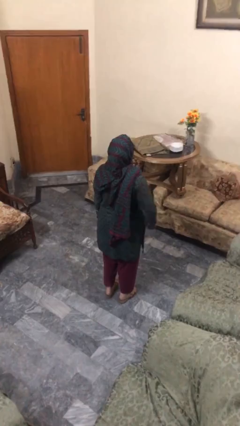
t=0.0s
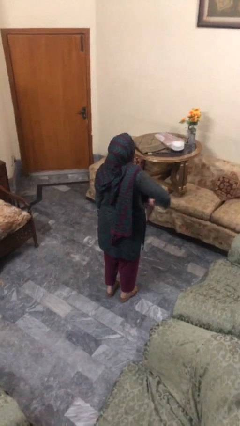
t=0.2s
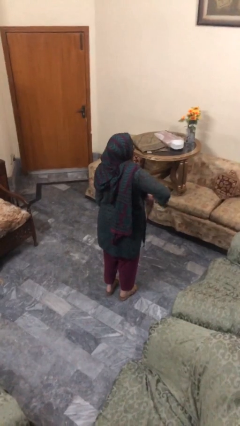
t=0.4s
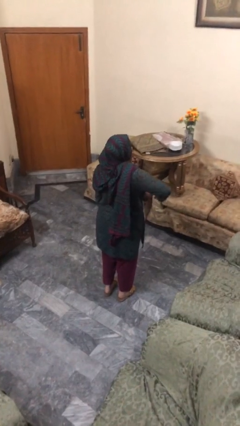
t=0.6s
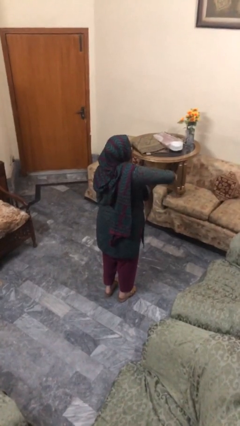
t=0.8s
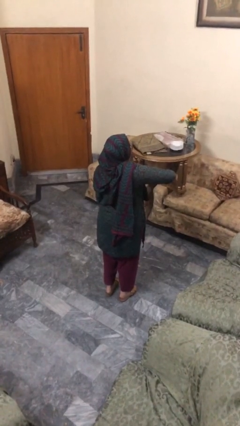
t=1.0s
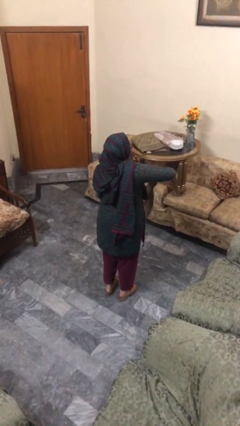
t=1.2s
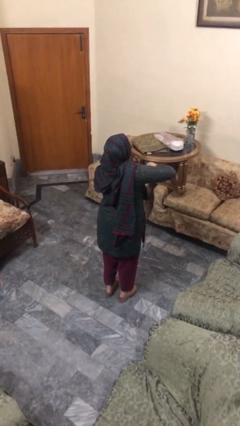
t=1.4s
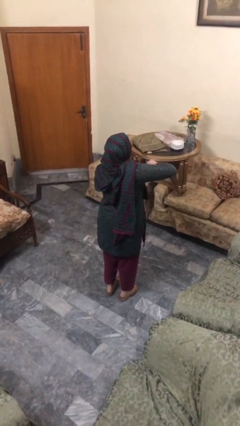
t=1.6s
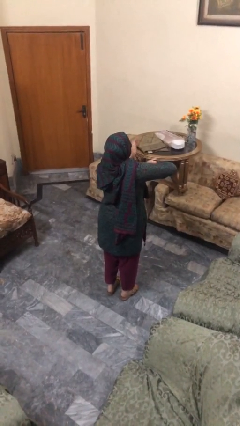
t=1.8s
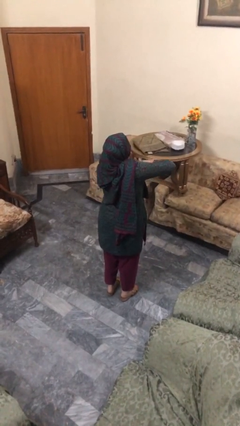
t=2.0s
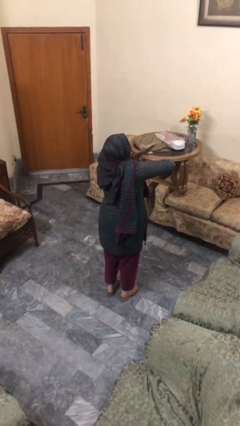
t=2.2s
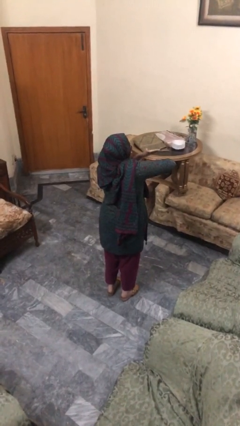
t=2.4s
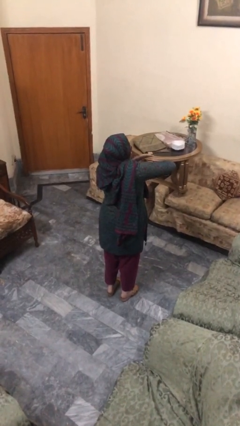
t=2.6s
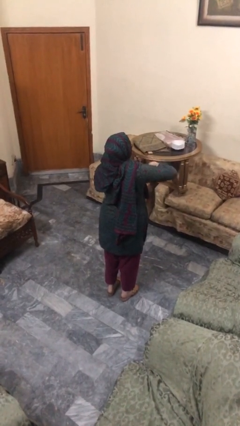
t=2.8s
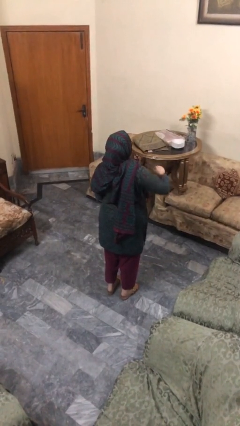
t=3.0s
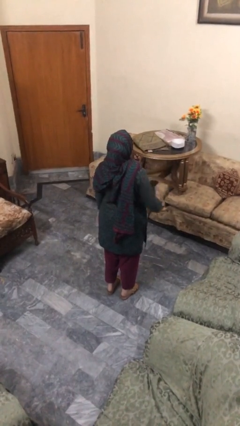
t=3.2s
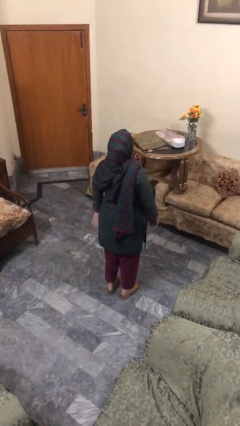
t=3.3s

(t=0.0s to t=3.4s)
person swats bug

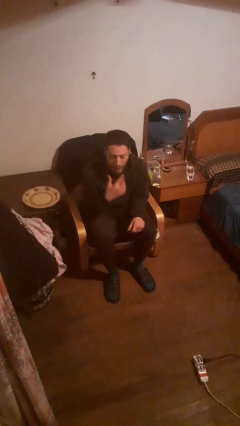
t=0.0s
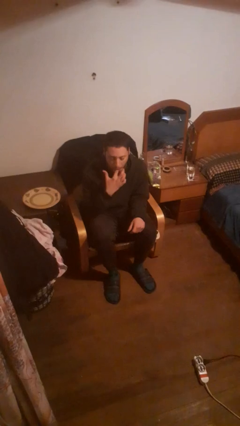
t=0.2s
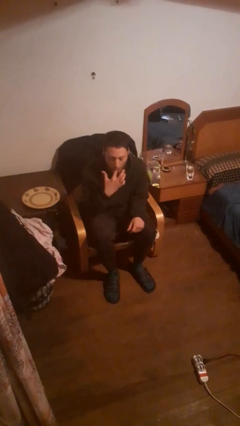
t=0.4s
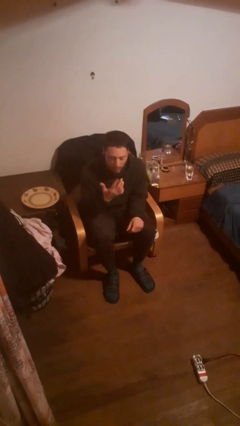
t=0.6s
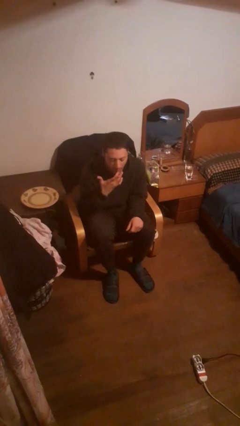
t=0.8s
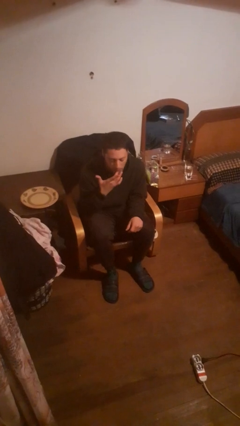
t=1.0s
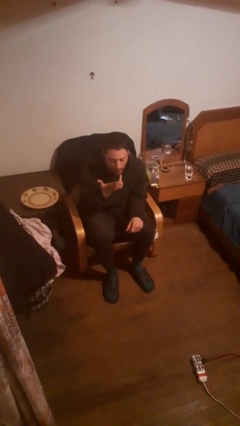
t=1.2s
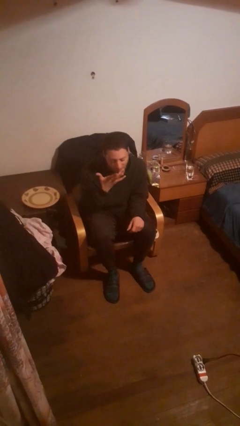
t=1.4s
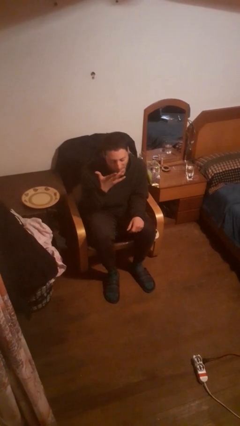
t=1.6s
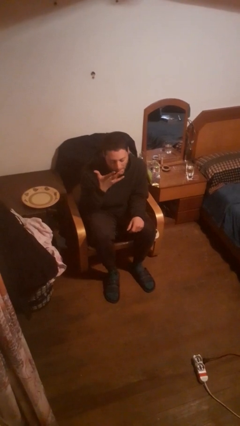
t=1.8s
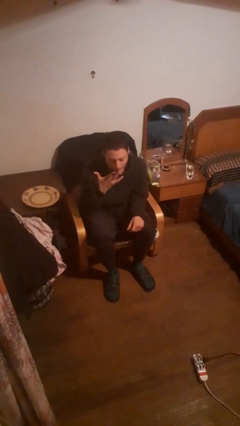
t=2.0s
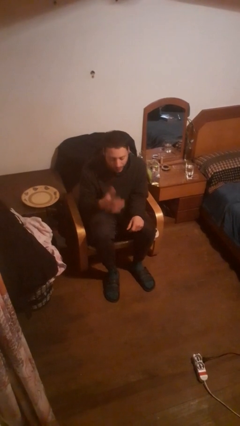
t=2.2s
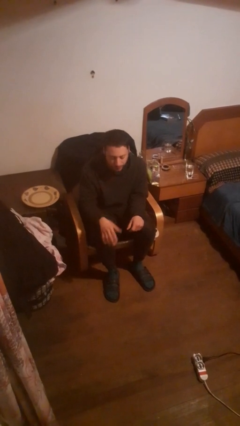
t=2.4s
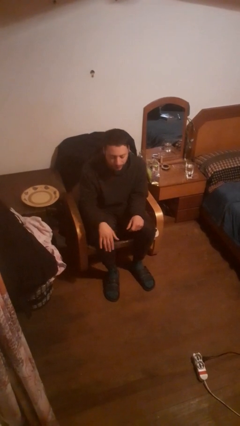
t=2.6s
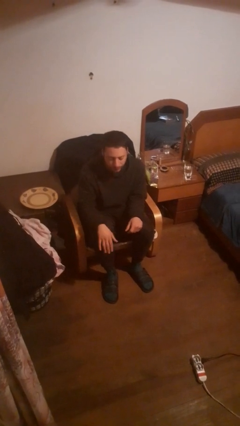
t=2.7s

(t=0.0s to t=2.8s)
person licks fingers

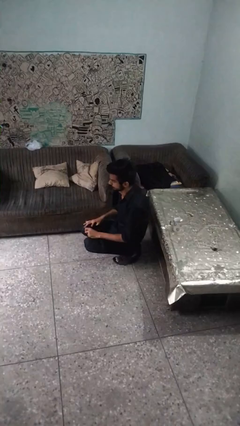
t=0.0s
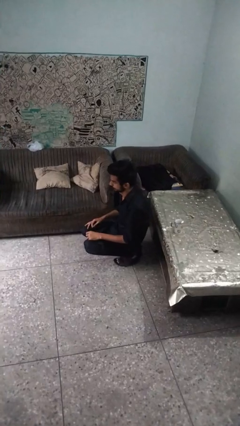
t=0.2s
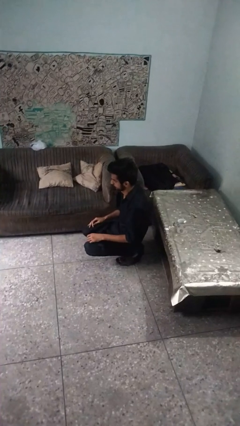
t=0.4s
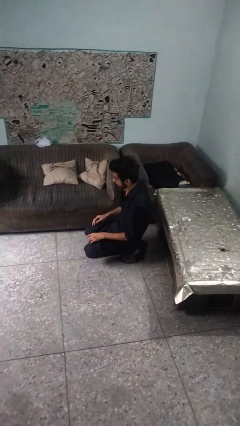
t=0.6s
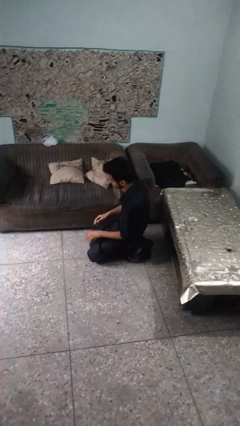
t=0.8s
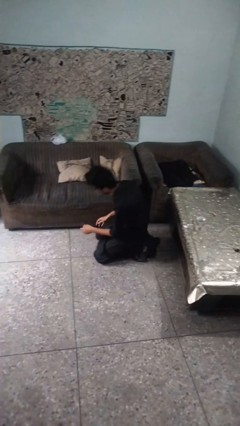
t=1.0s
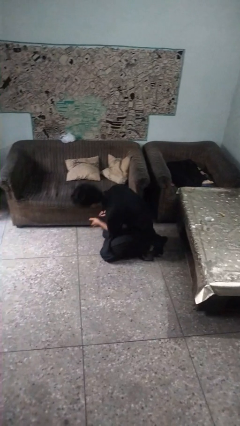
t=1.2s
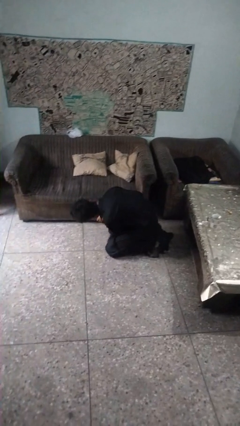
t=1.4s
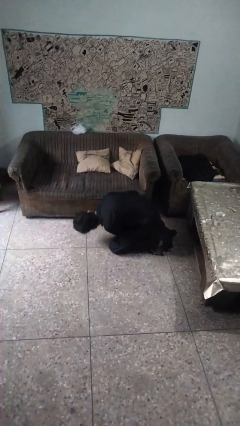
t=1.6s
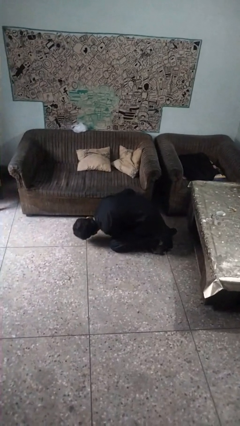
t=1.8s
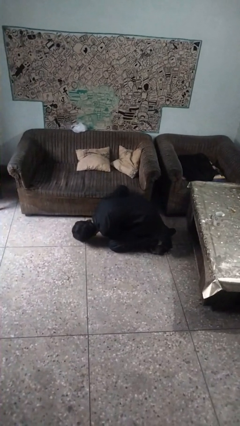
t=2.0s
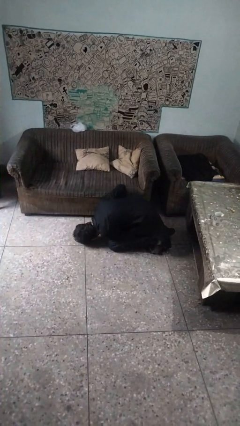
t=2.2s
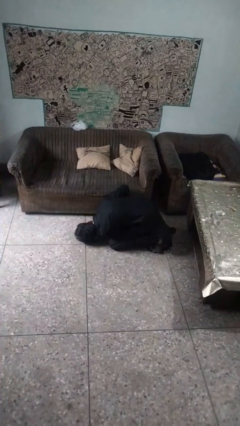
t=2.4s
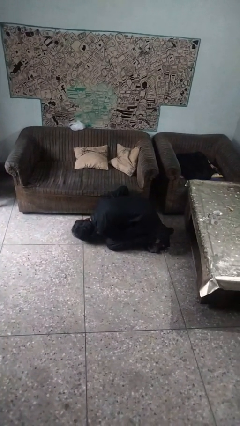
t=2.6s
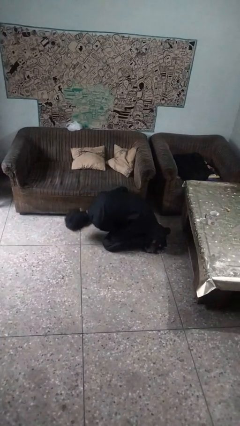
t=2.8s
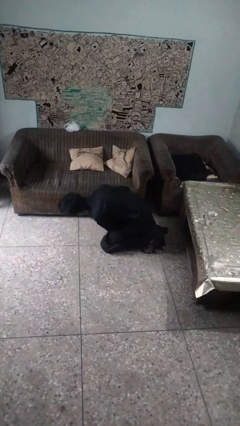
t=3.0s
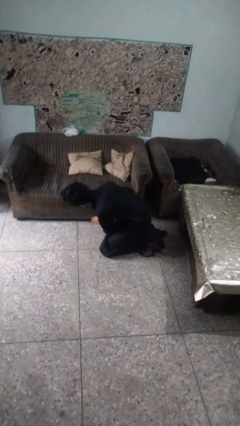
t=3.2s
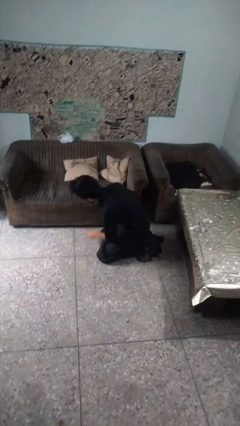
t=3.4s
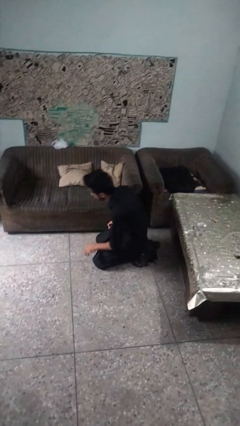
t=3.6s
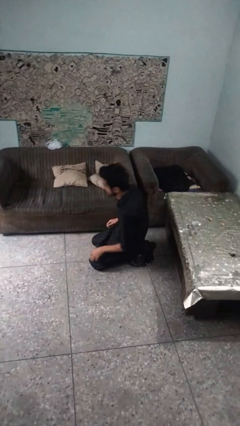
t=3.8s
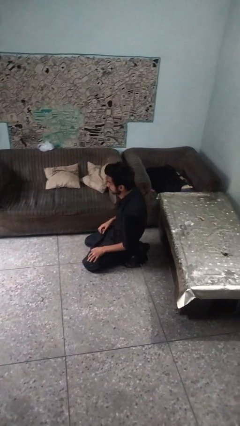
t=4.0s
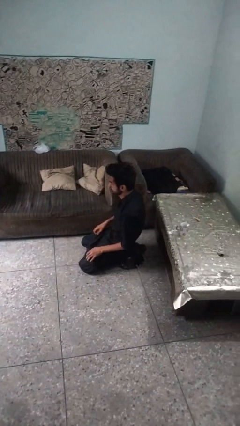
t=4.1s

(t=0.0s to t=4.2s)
person searches under couch

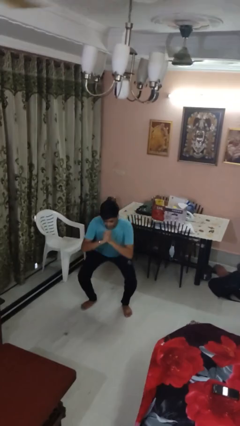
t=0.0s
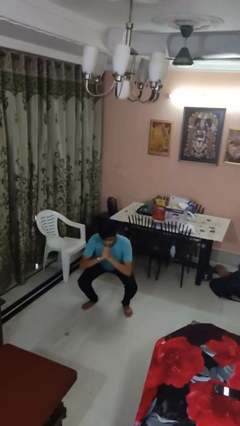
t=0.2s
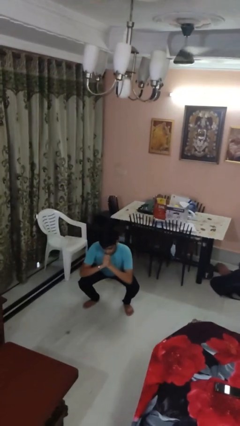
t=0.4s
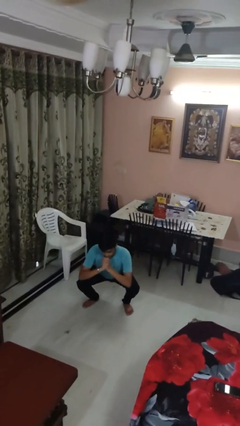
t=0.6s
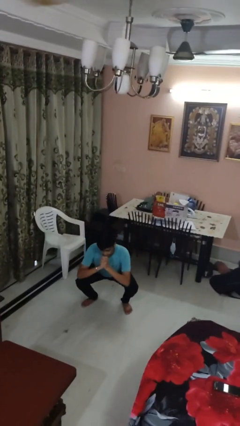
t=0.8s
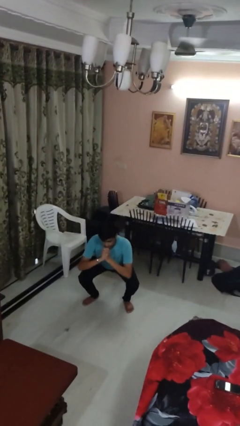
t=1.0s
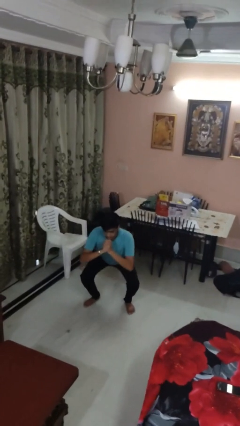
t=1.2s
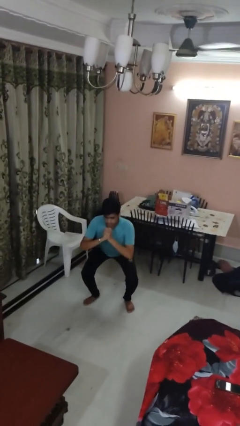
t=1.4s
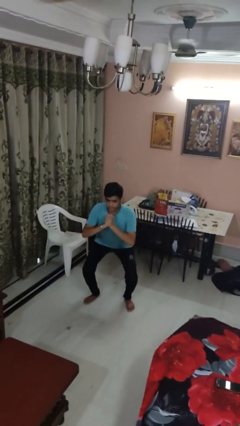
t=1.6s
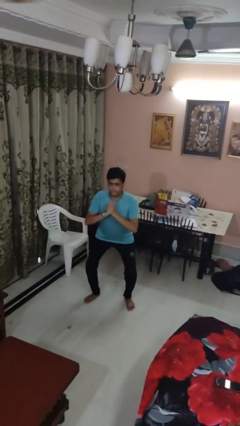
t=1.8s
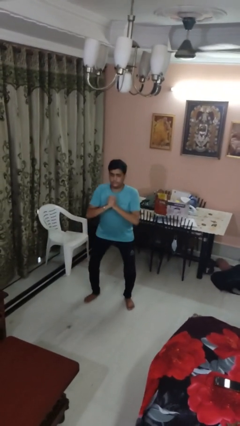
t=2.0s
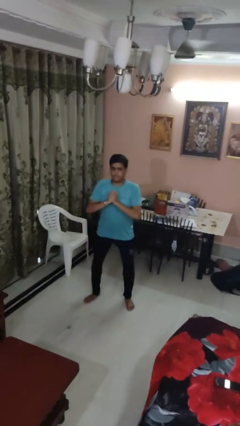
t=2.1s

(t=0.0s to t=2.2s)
person squats

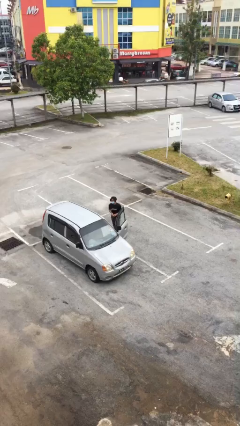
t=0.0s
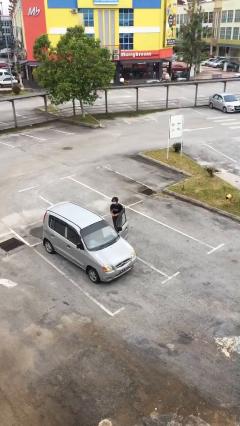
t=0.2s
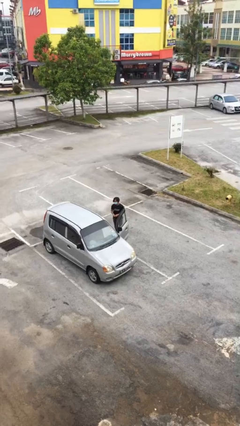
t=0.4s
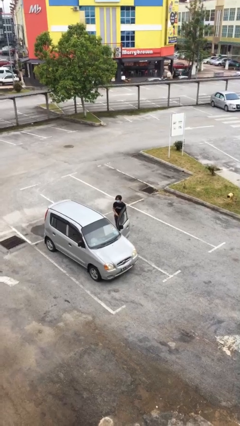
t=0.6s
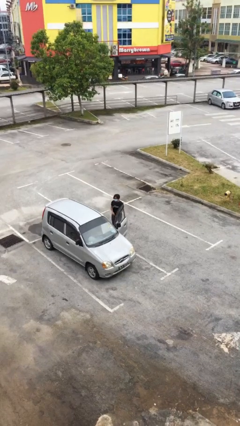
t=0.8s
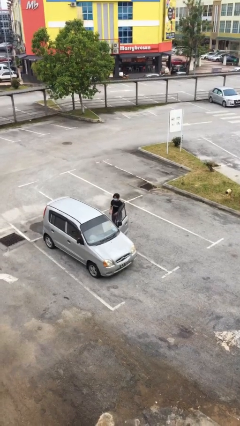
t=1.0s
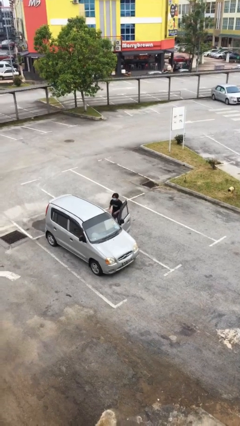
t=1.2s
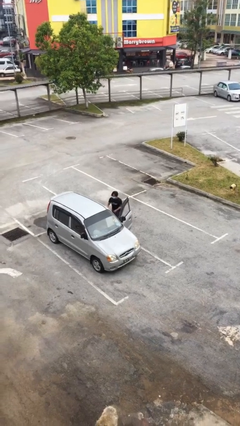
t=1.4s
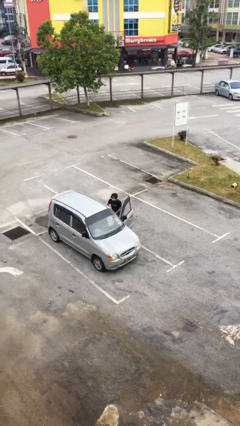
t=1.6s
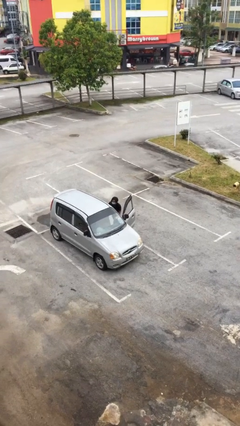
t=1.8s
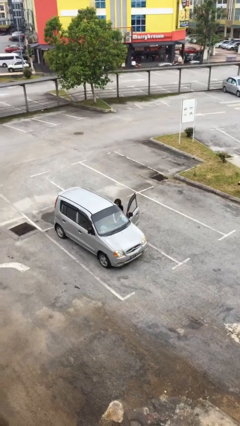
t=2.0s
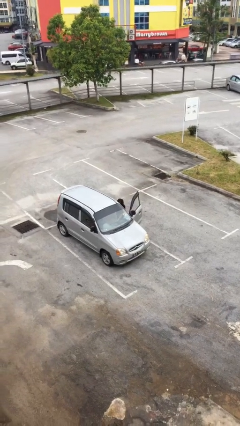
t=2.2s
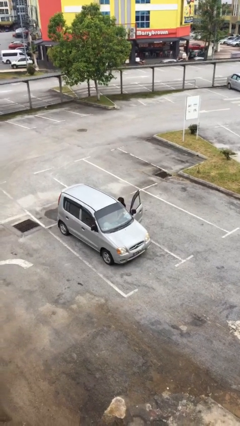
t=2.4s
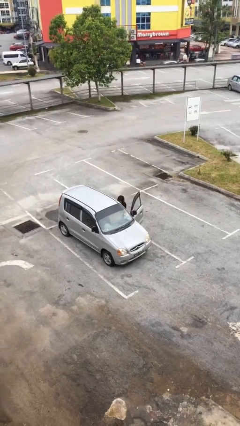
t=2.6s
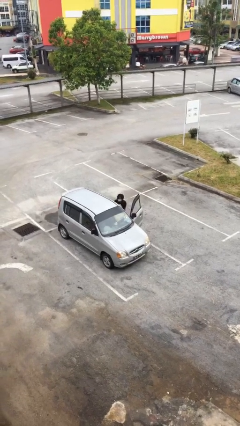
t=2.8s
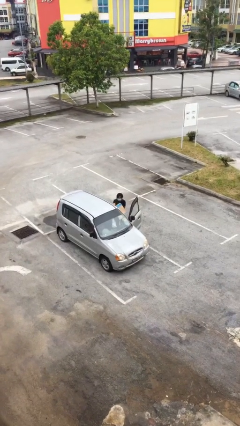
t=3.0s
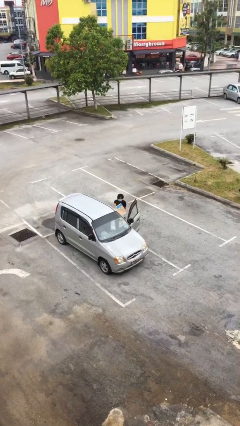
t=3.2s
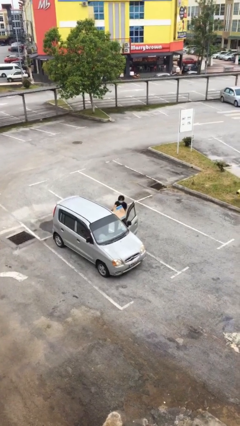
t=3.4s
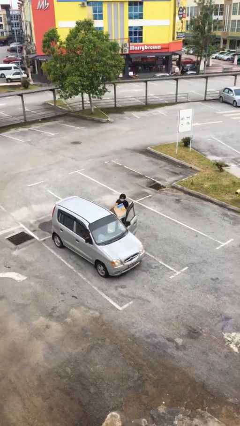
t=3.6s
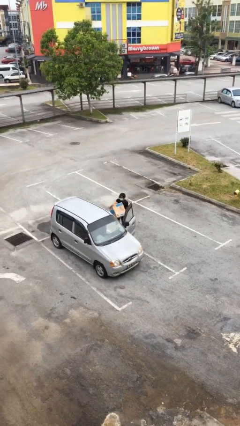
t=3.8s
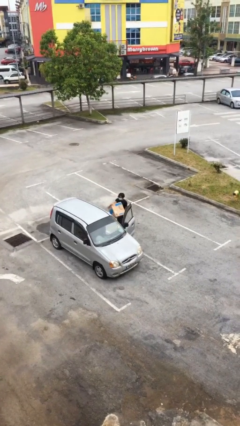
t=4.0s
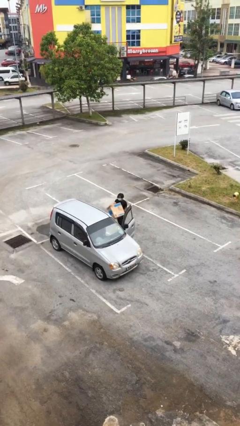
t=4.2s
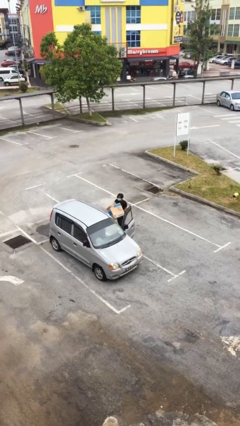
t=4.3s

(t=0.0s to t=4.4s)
person unloads car

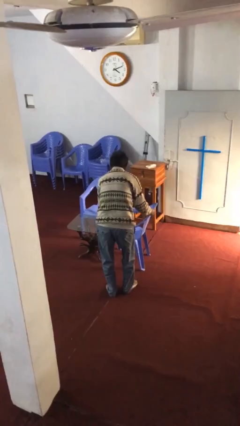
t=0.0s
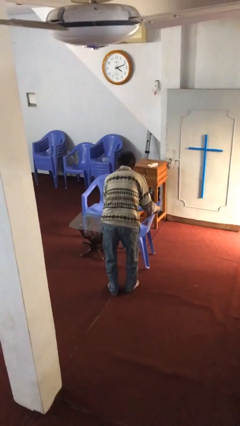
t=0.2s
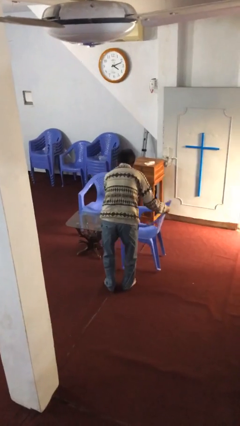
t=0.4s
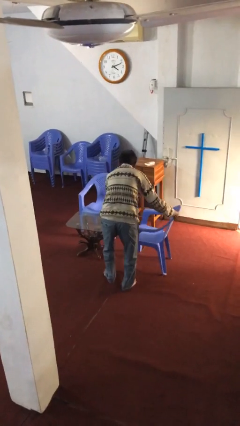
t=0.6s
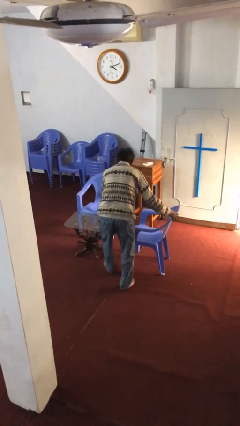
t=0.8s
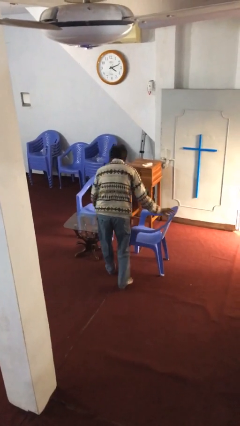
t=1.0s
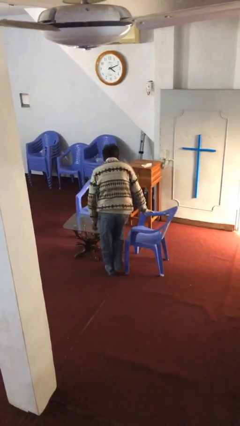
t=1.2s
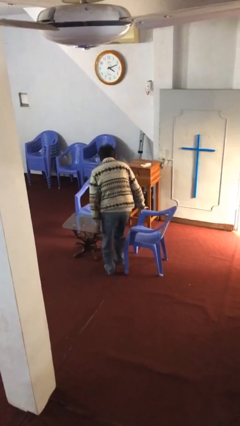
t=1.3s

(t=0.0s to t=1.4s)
person sits down
